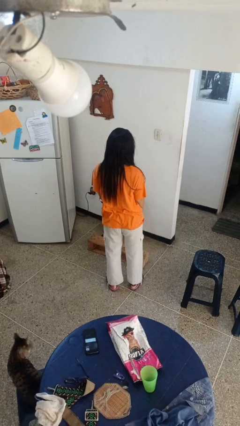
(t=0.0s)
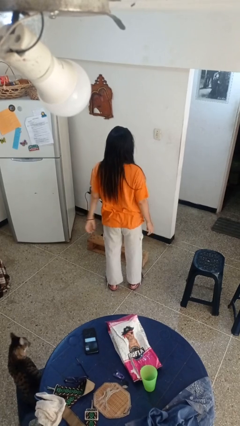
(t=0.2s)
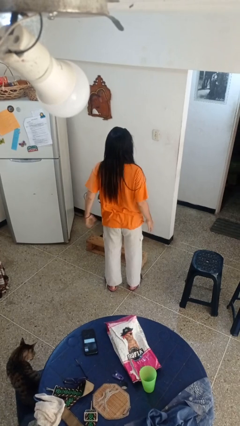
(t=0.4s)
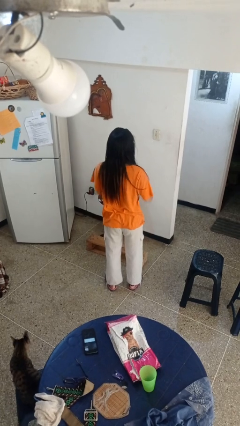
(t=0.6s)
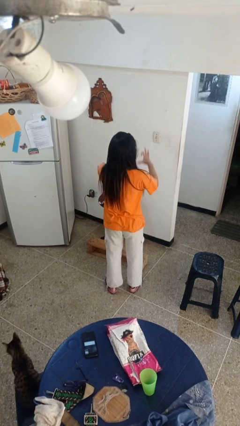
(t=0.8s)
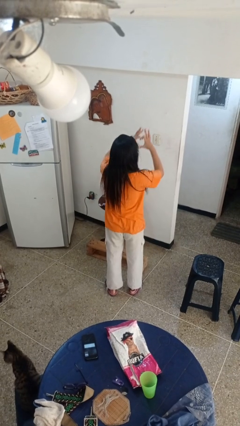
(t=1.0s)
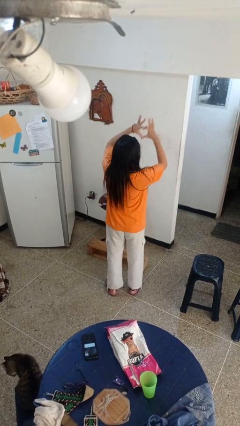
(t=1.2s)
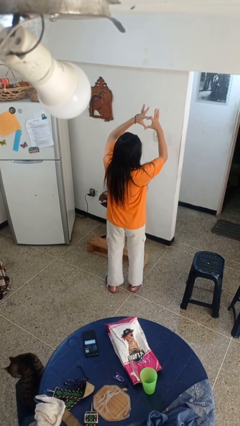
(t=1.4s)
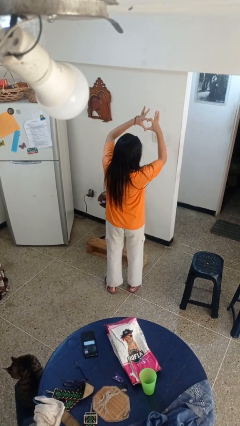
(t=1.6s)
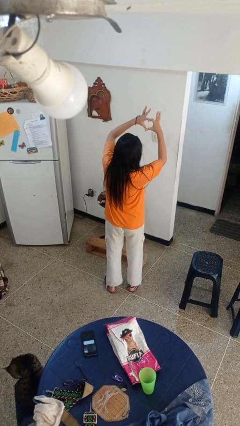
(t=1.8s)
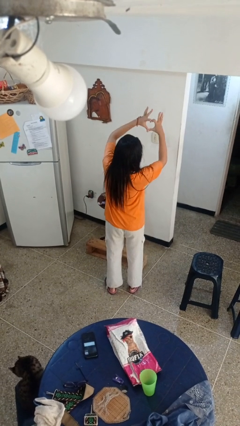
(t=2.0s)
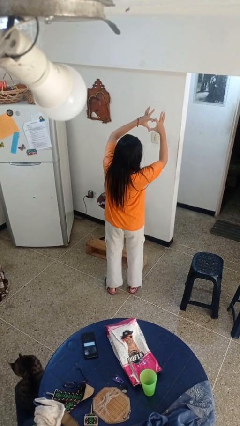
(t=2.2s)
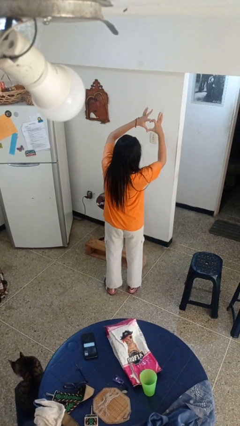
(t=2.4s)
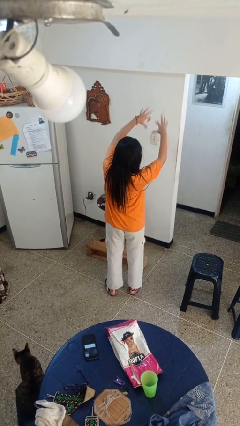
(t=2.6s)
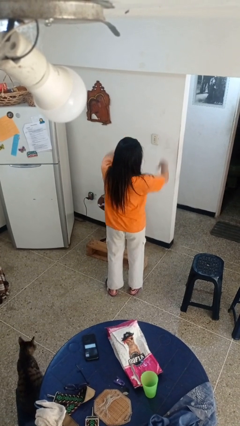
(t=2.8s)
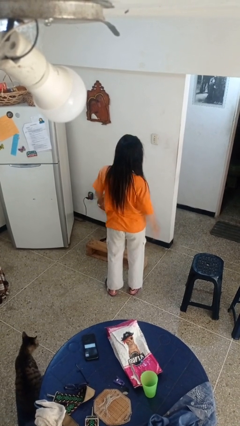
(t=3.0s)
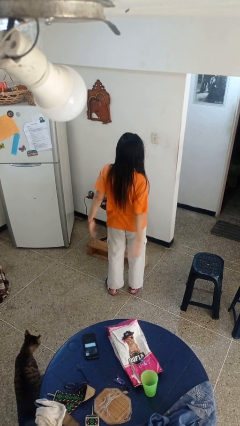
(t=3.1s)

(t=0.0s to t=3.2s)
person gestures heart

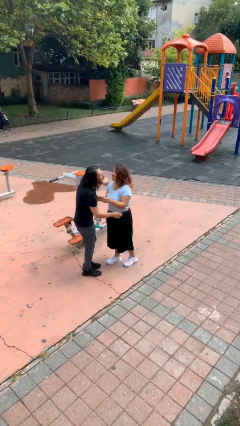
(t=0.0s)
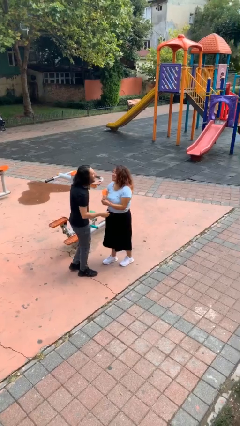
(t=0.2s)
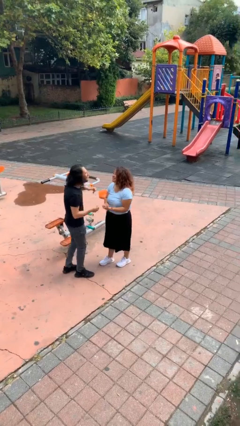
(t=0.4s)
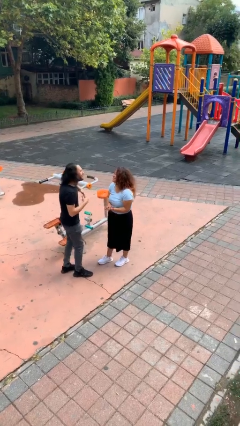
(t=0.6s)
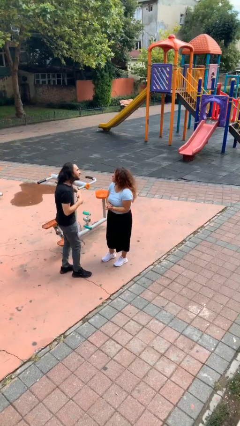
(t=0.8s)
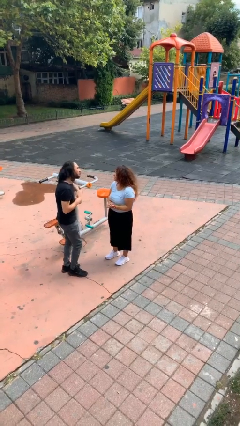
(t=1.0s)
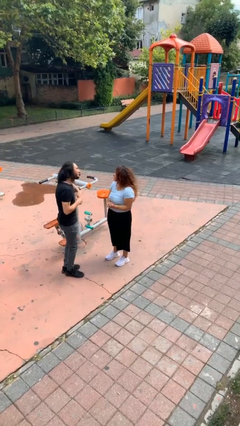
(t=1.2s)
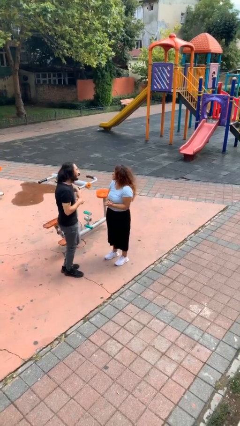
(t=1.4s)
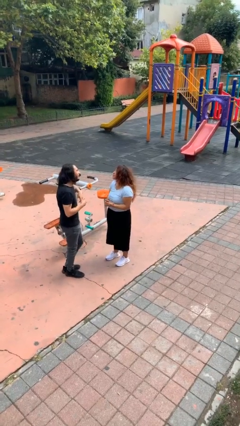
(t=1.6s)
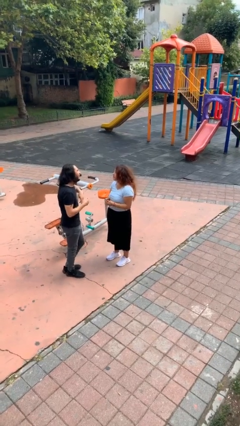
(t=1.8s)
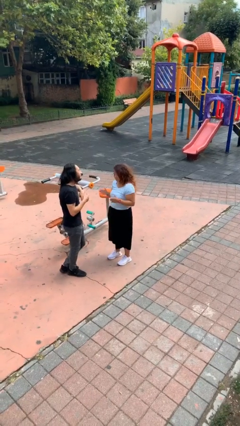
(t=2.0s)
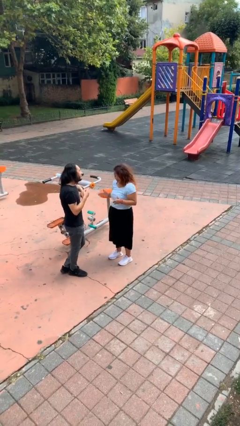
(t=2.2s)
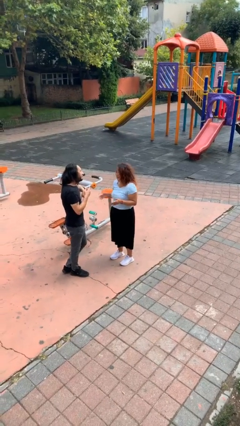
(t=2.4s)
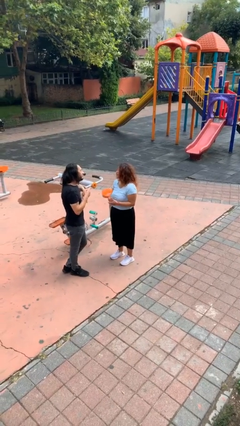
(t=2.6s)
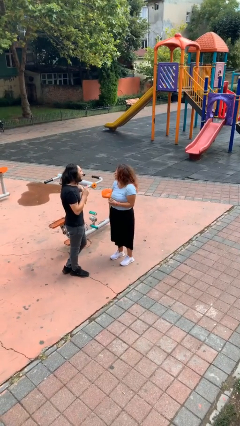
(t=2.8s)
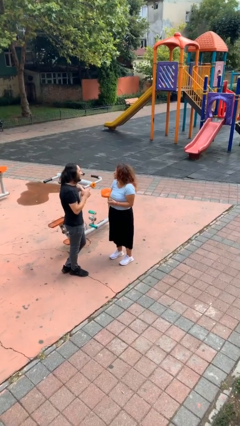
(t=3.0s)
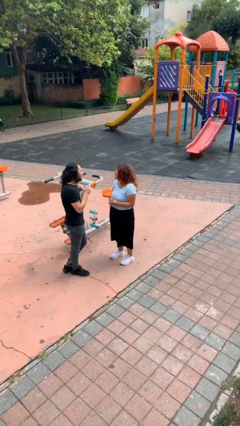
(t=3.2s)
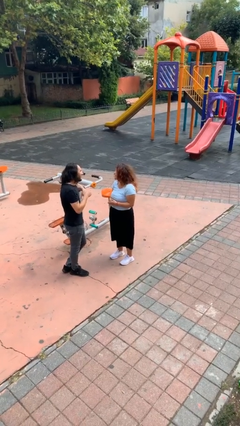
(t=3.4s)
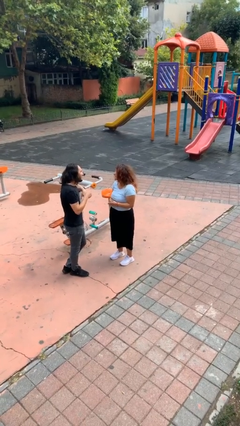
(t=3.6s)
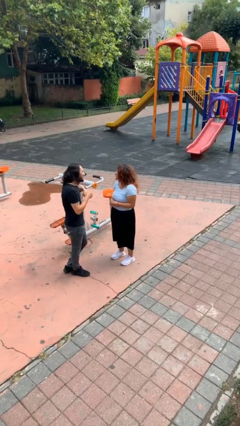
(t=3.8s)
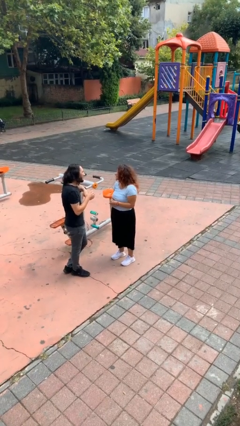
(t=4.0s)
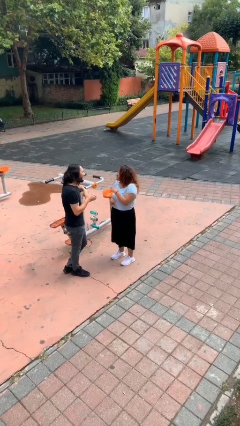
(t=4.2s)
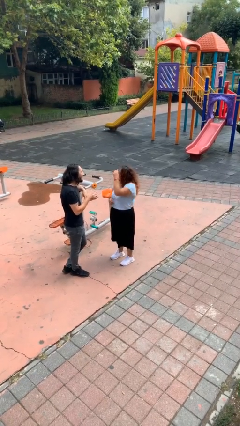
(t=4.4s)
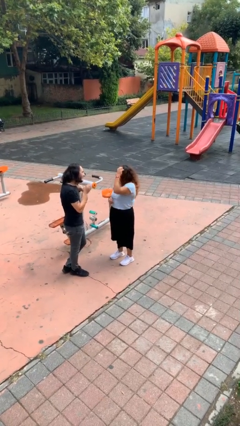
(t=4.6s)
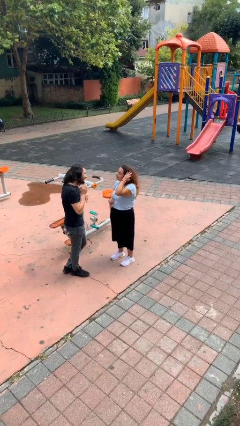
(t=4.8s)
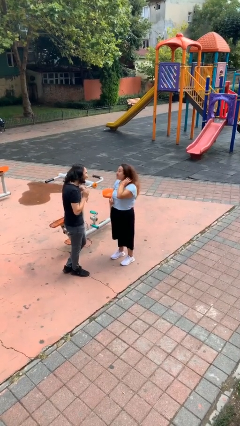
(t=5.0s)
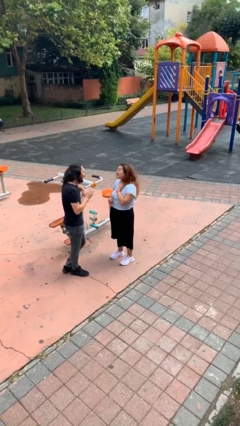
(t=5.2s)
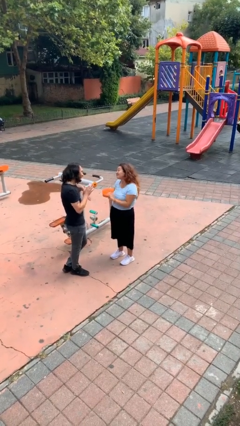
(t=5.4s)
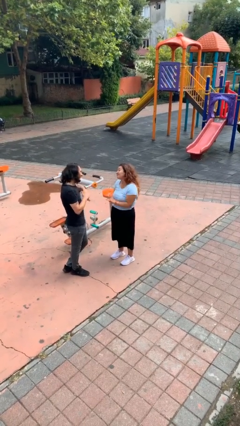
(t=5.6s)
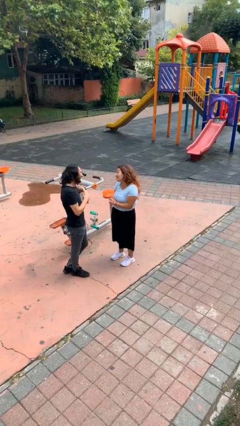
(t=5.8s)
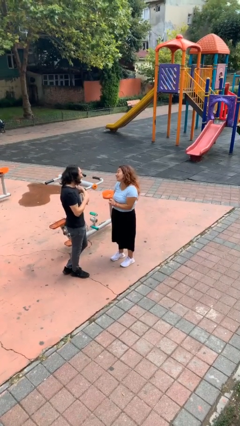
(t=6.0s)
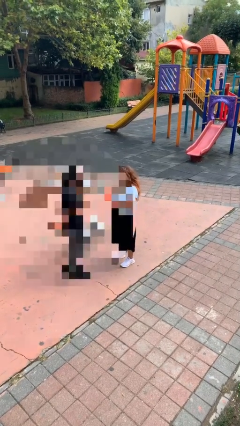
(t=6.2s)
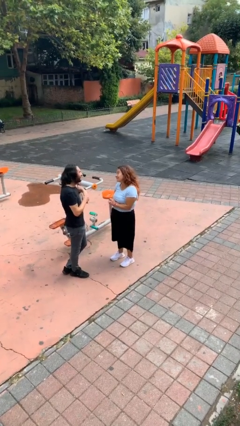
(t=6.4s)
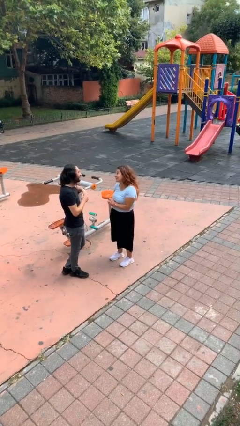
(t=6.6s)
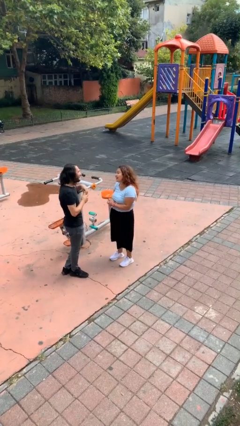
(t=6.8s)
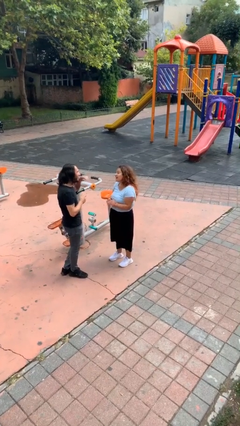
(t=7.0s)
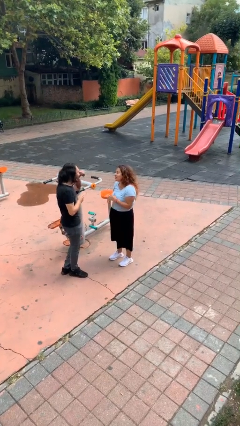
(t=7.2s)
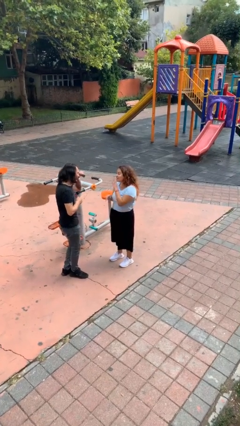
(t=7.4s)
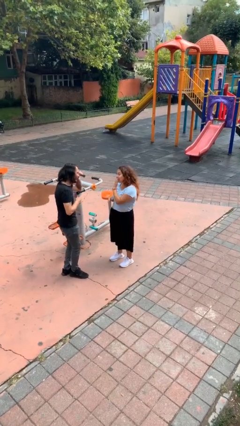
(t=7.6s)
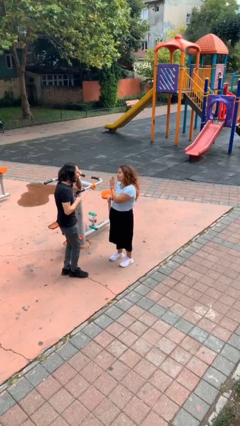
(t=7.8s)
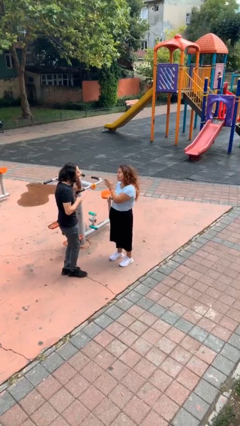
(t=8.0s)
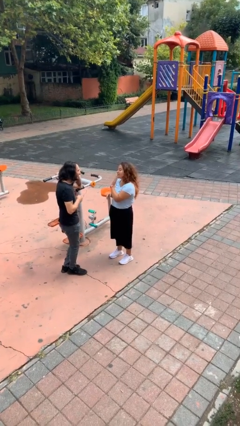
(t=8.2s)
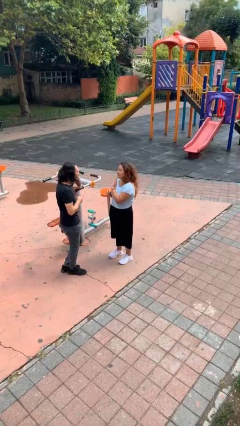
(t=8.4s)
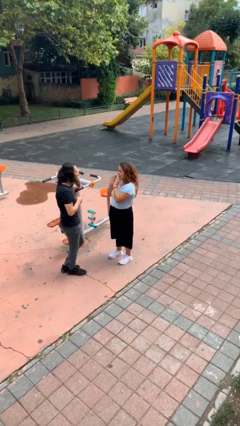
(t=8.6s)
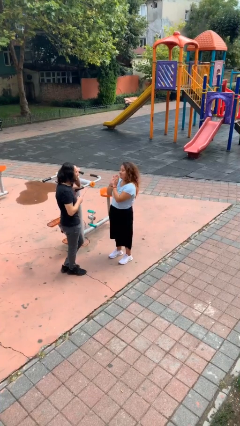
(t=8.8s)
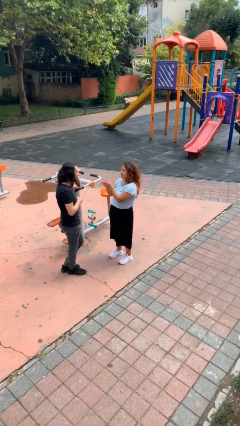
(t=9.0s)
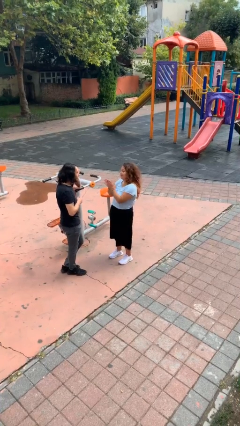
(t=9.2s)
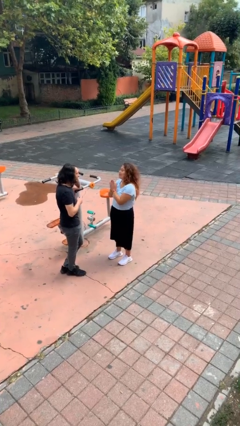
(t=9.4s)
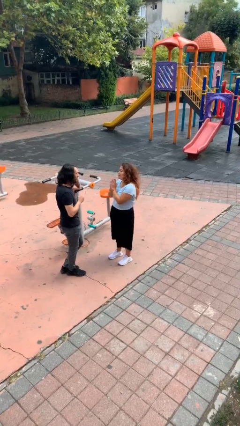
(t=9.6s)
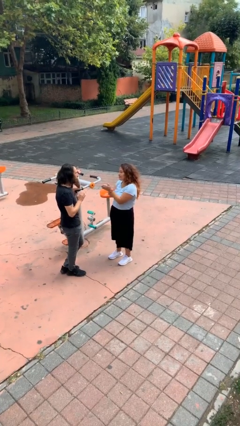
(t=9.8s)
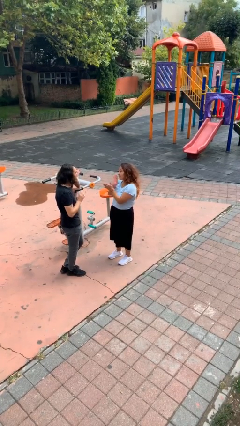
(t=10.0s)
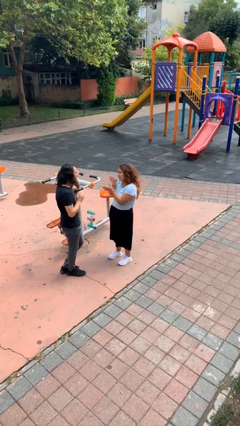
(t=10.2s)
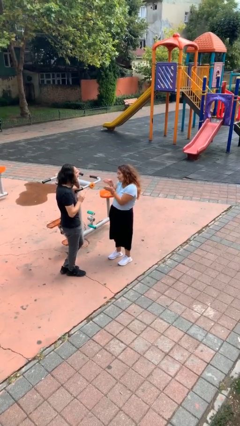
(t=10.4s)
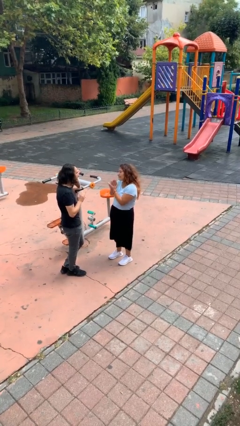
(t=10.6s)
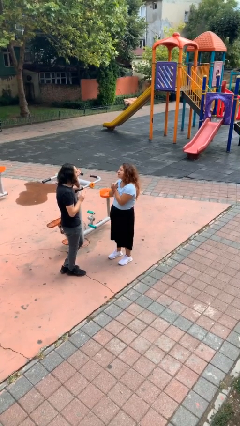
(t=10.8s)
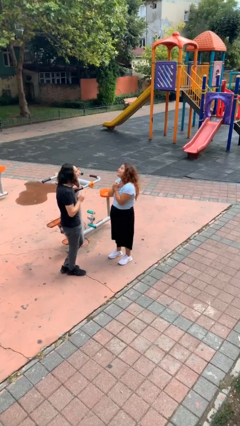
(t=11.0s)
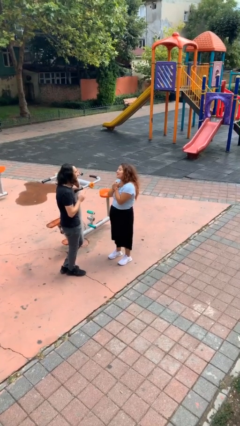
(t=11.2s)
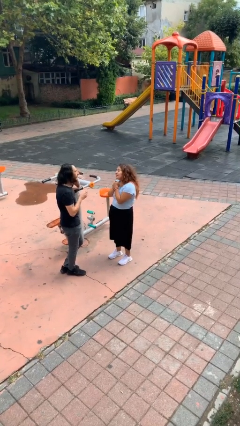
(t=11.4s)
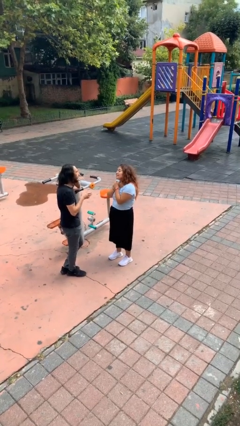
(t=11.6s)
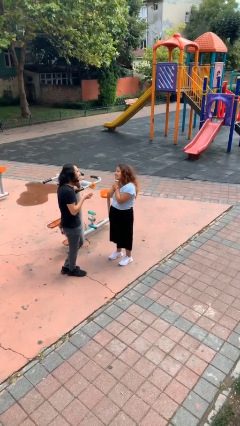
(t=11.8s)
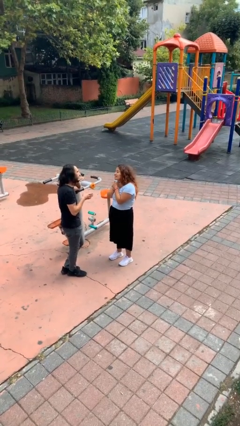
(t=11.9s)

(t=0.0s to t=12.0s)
person talks to person

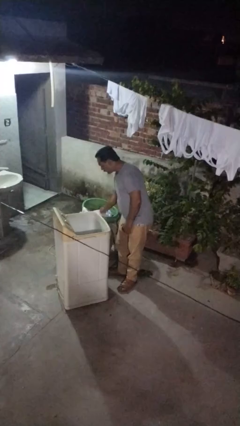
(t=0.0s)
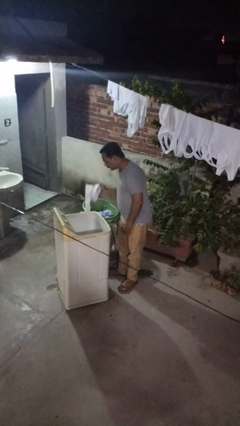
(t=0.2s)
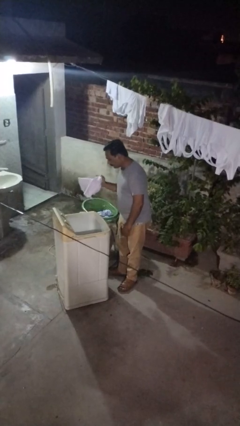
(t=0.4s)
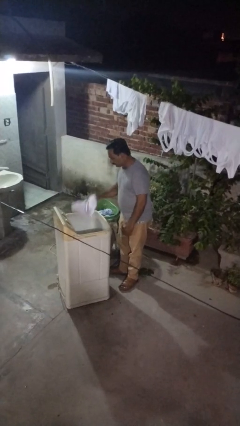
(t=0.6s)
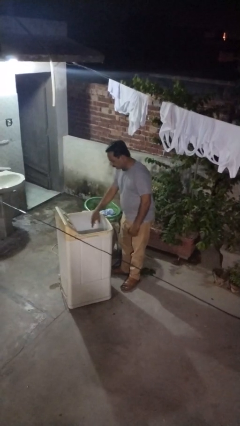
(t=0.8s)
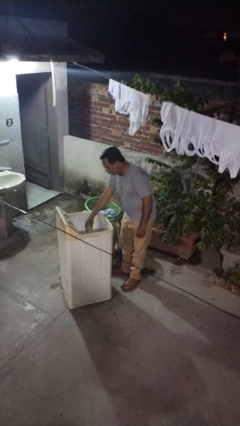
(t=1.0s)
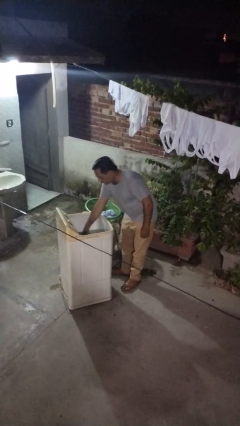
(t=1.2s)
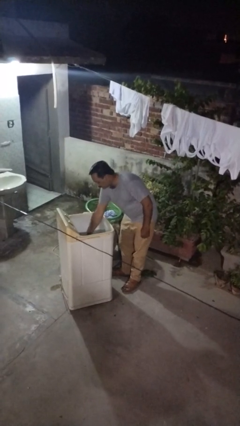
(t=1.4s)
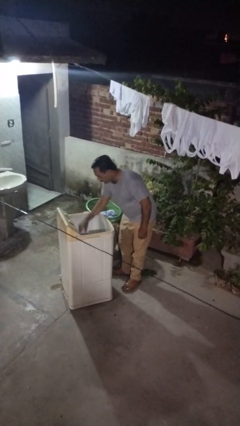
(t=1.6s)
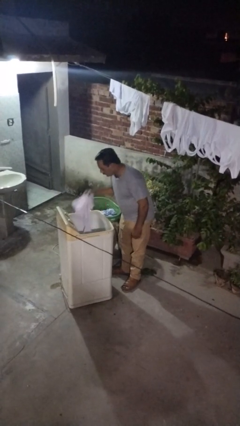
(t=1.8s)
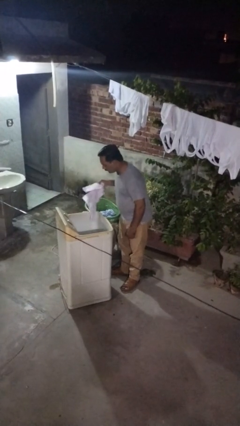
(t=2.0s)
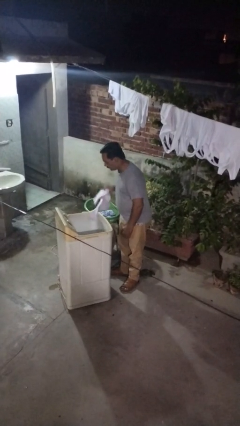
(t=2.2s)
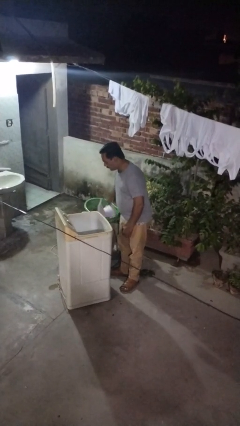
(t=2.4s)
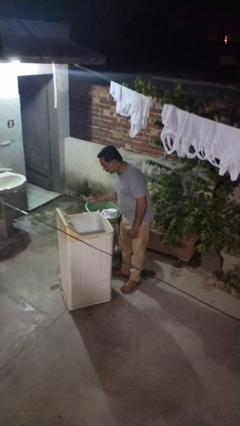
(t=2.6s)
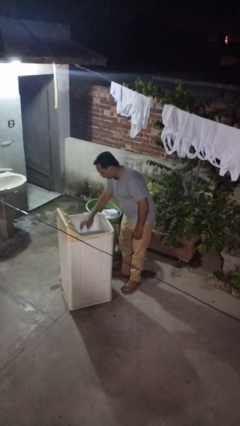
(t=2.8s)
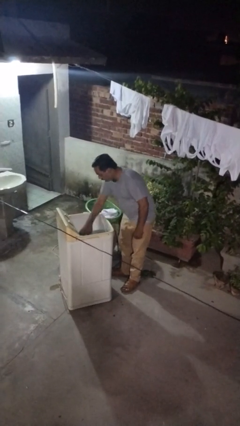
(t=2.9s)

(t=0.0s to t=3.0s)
person loads clotheswasher
